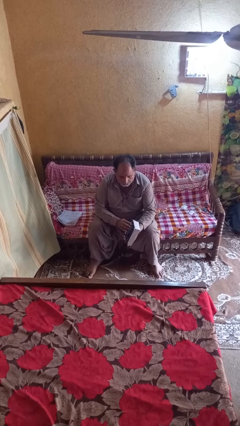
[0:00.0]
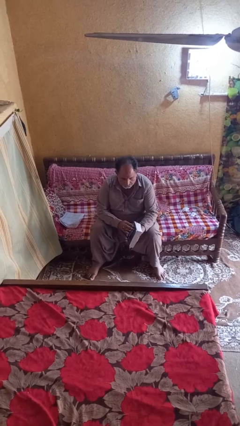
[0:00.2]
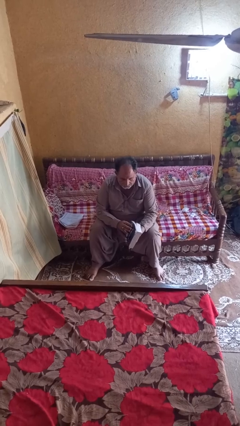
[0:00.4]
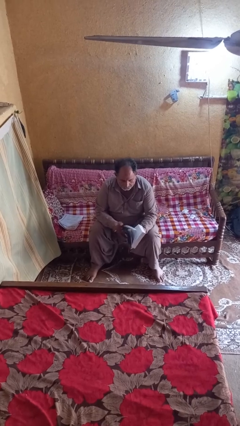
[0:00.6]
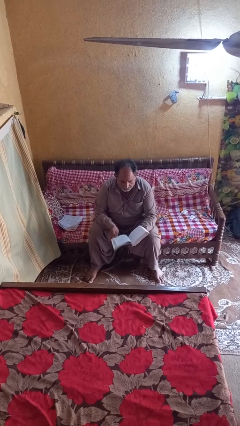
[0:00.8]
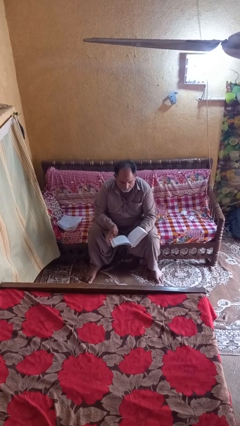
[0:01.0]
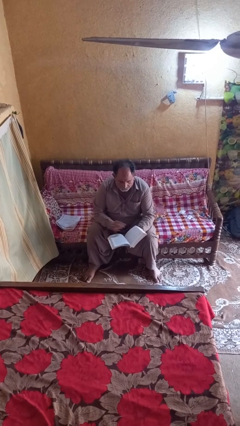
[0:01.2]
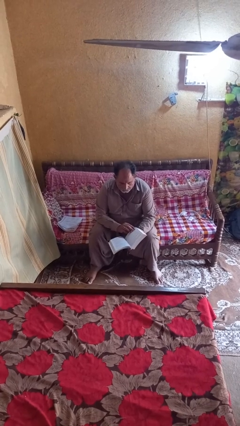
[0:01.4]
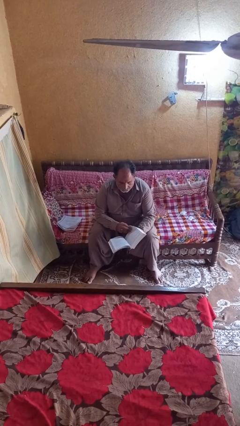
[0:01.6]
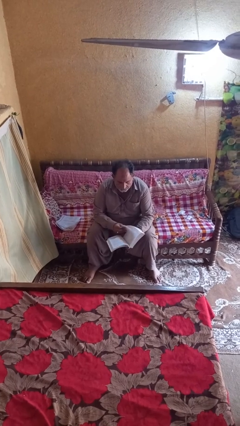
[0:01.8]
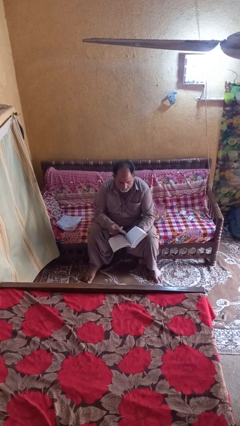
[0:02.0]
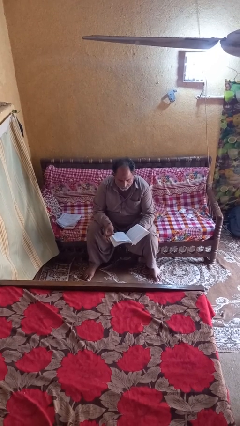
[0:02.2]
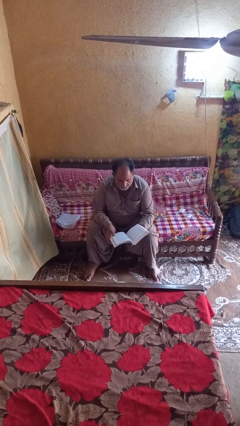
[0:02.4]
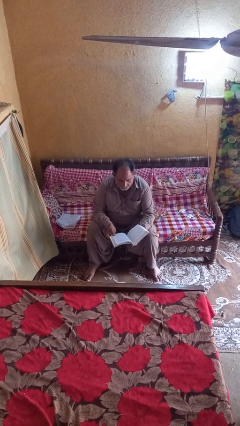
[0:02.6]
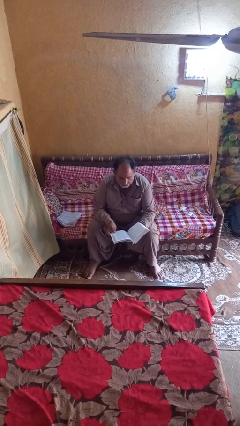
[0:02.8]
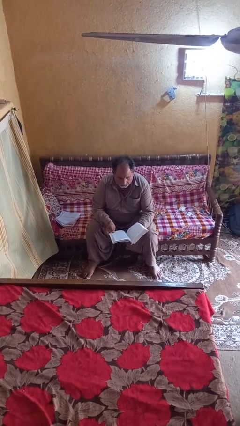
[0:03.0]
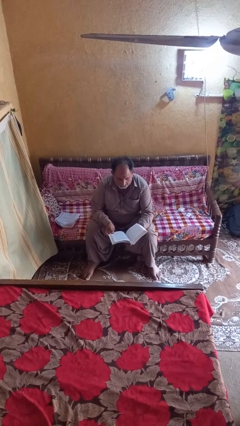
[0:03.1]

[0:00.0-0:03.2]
person reads book

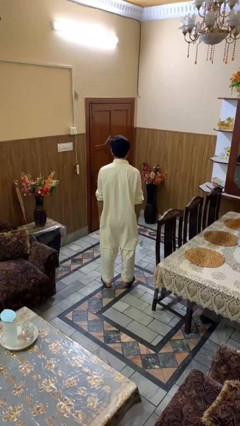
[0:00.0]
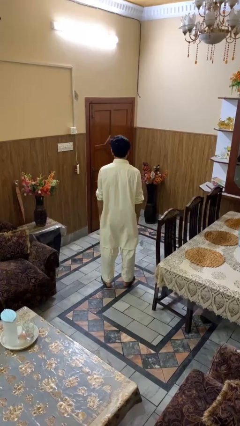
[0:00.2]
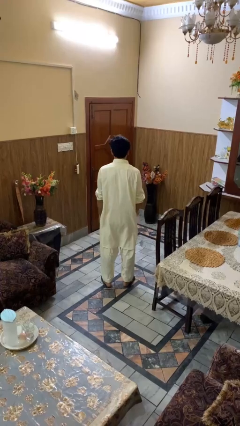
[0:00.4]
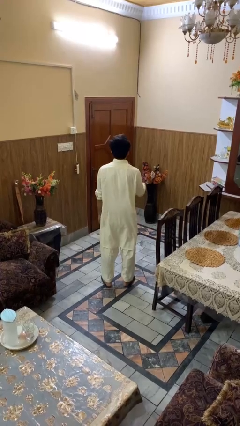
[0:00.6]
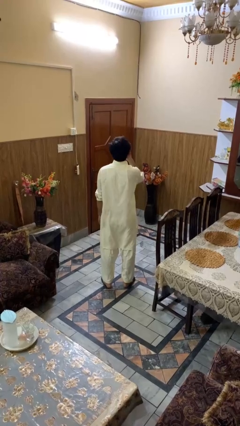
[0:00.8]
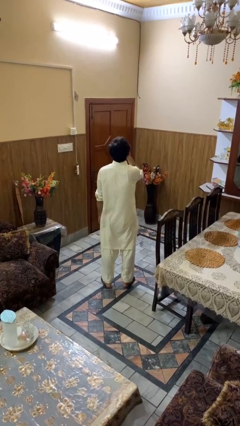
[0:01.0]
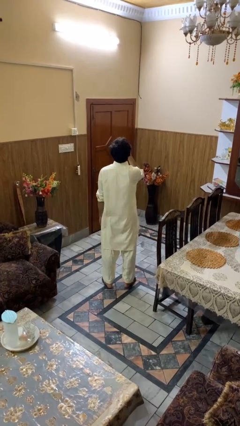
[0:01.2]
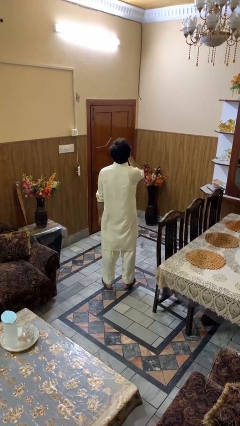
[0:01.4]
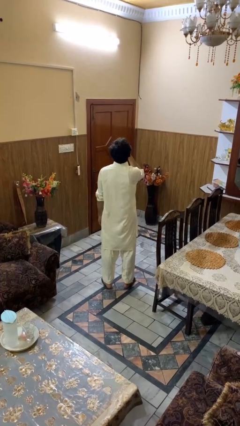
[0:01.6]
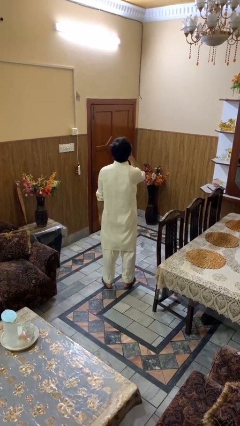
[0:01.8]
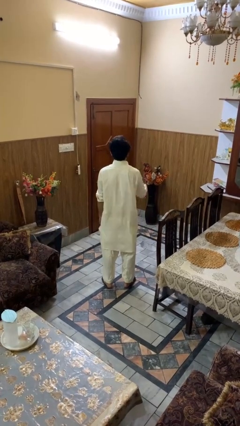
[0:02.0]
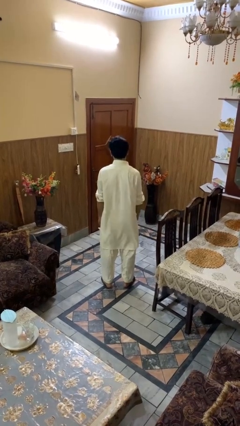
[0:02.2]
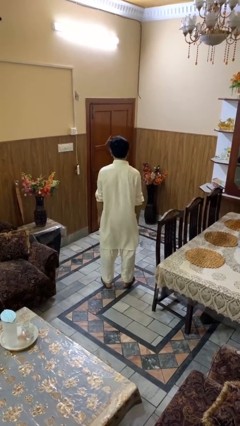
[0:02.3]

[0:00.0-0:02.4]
person yawns

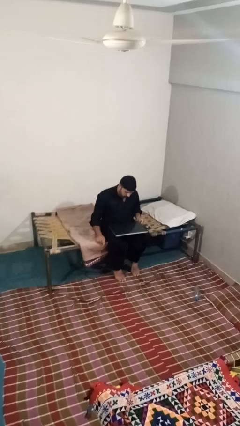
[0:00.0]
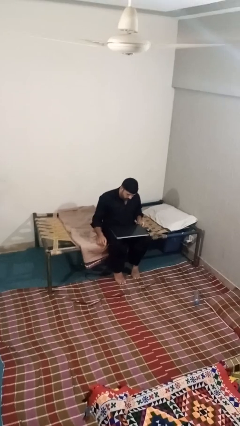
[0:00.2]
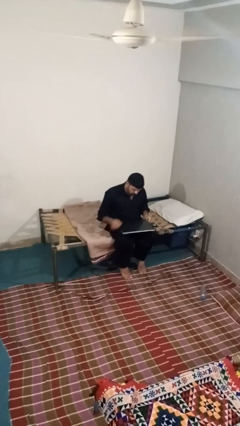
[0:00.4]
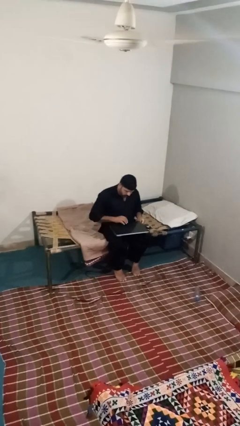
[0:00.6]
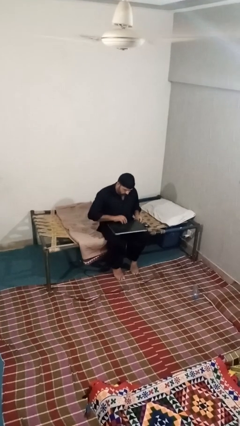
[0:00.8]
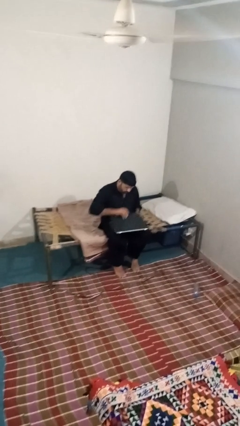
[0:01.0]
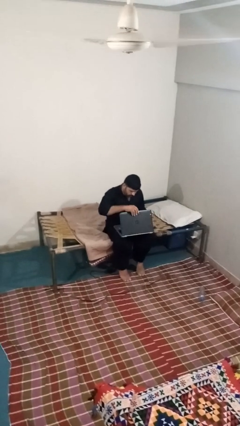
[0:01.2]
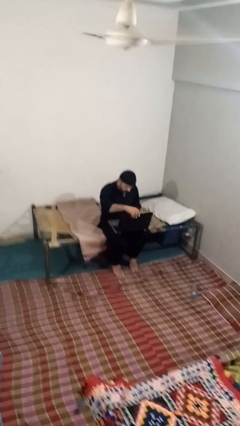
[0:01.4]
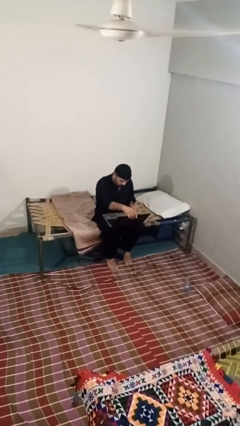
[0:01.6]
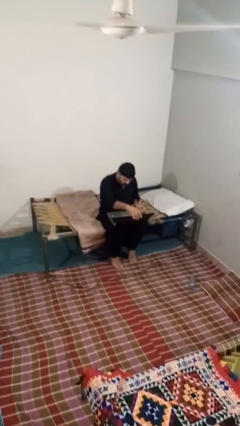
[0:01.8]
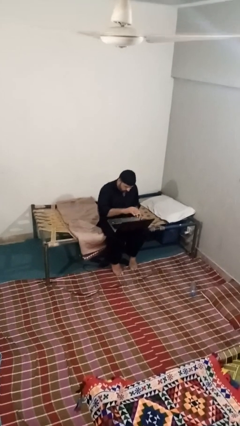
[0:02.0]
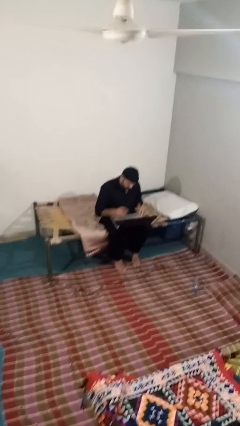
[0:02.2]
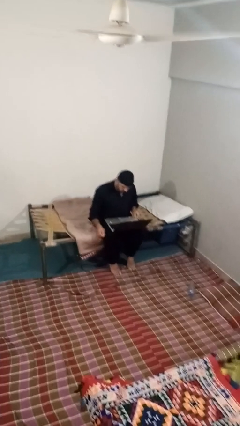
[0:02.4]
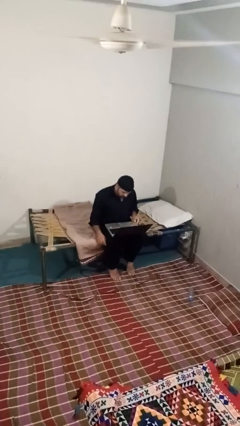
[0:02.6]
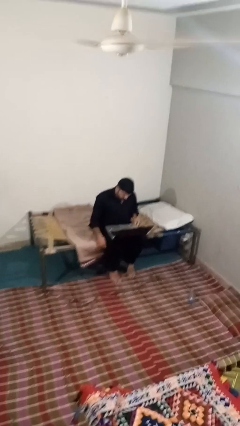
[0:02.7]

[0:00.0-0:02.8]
person opens laptop

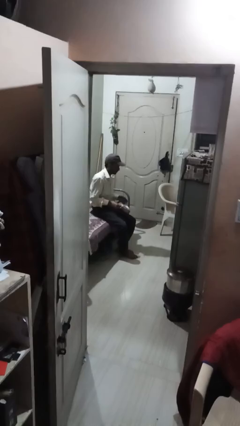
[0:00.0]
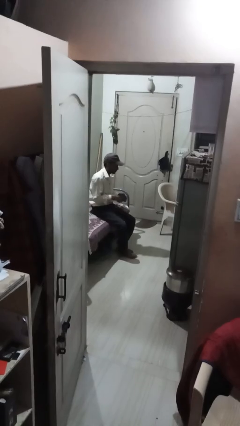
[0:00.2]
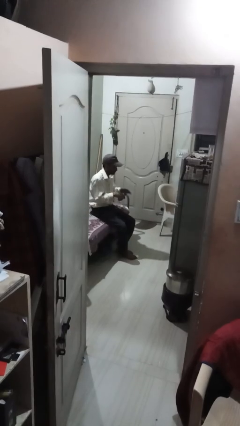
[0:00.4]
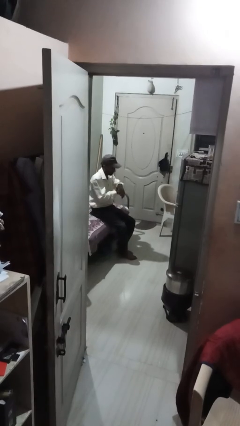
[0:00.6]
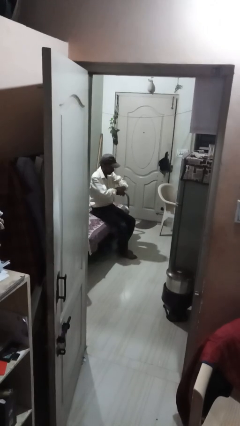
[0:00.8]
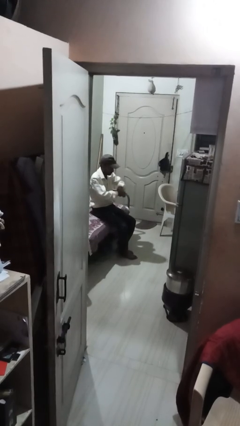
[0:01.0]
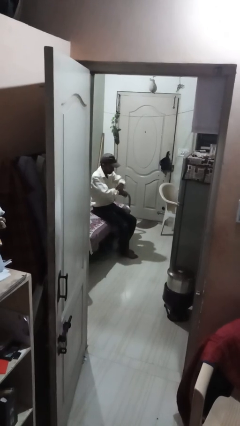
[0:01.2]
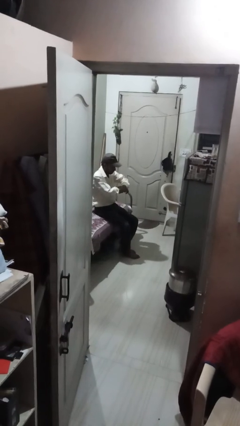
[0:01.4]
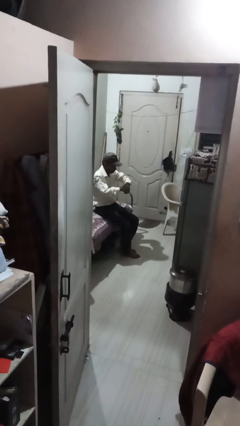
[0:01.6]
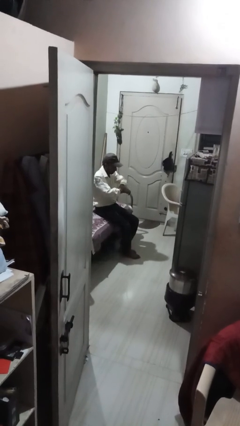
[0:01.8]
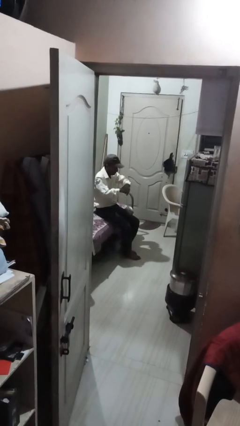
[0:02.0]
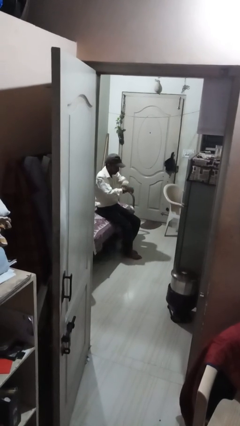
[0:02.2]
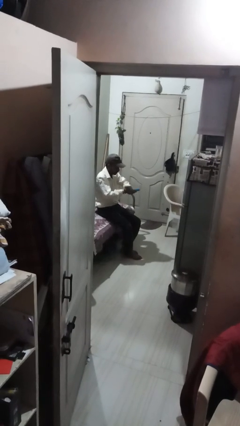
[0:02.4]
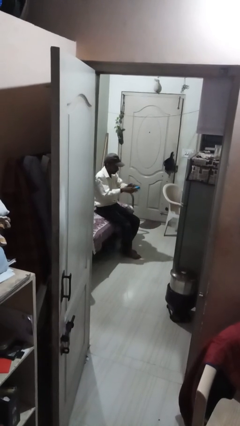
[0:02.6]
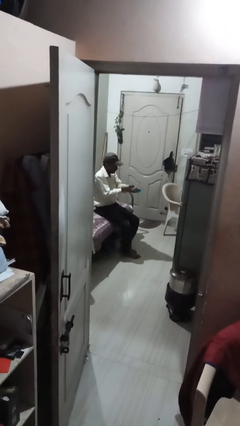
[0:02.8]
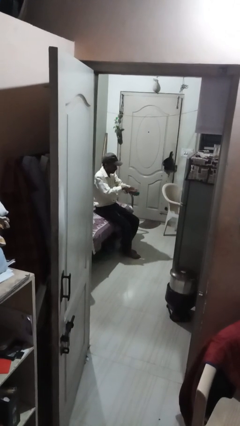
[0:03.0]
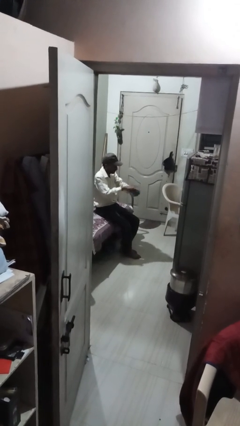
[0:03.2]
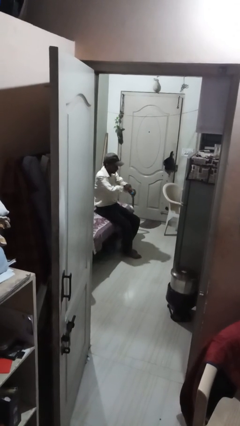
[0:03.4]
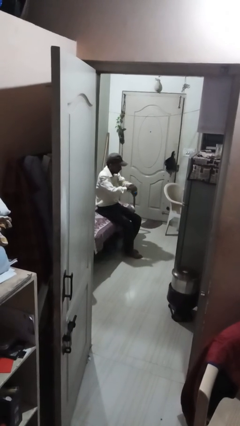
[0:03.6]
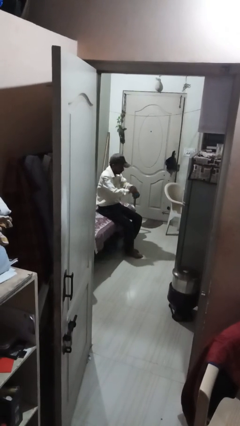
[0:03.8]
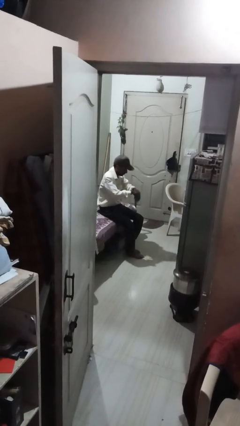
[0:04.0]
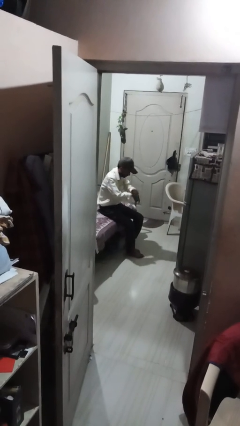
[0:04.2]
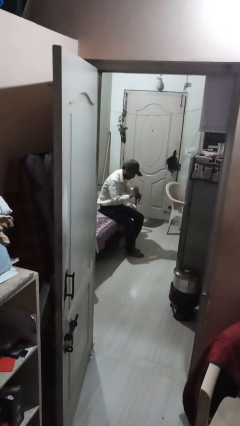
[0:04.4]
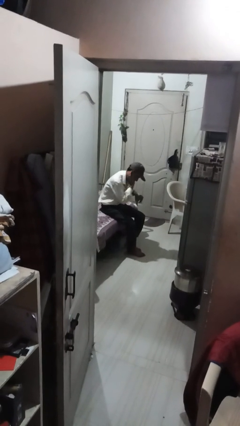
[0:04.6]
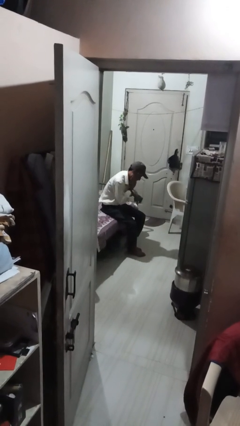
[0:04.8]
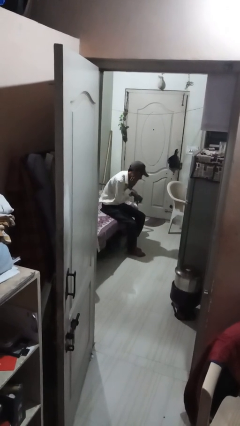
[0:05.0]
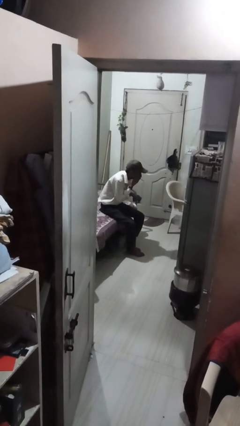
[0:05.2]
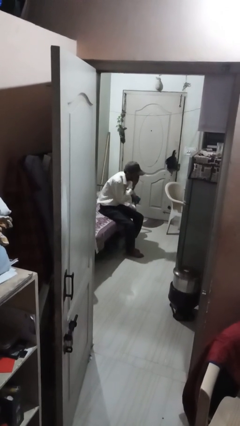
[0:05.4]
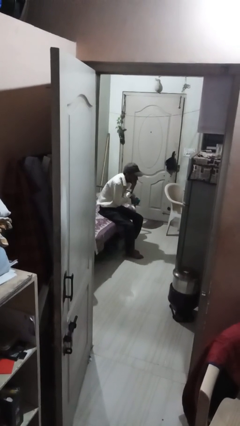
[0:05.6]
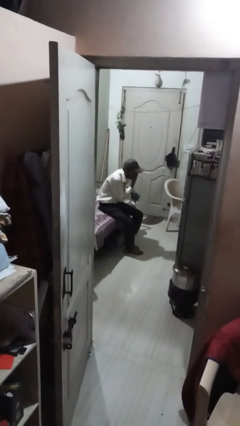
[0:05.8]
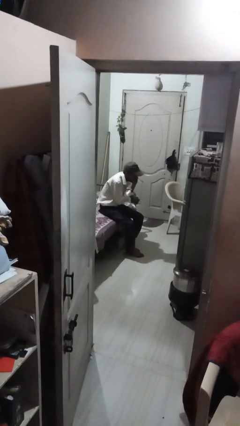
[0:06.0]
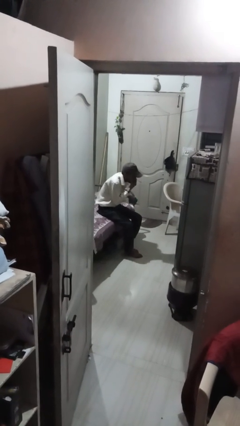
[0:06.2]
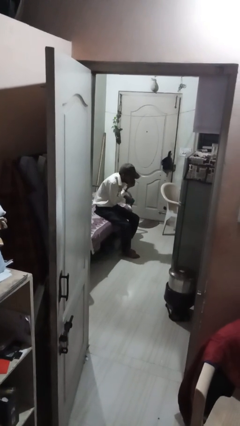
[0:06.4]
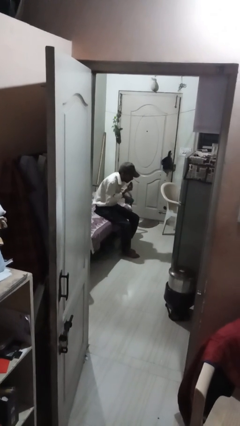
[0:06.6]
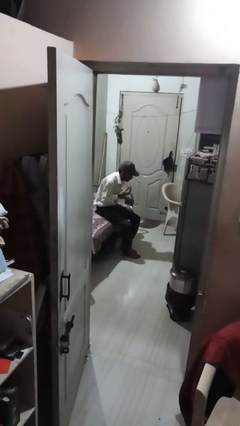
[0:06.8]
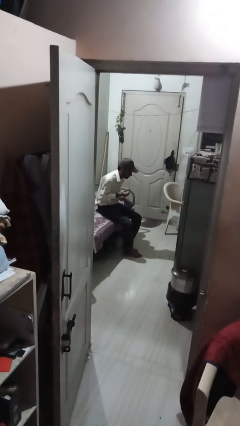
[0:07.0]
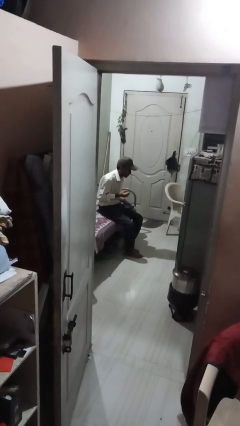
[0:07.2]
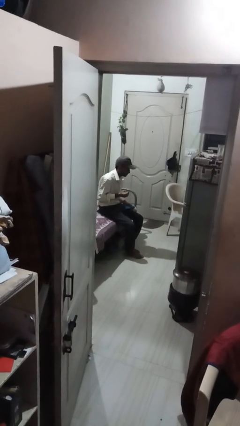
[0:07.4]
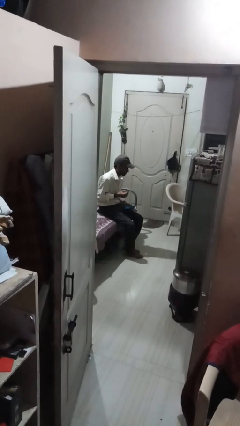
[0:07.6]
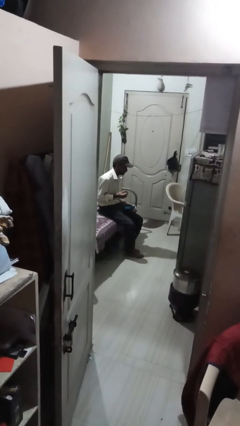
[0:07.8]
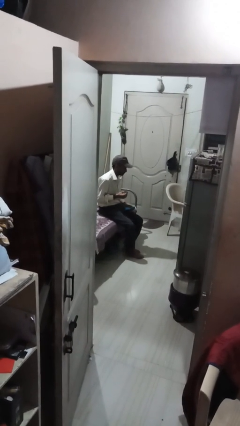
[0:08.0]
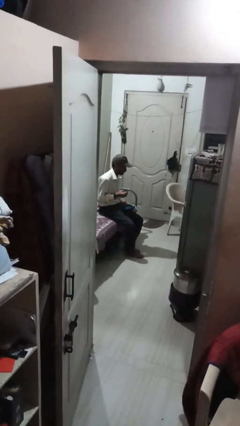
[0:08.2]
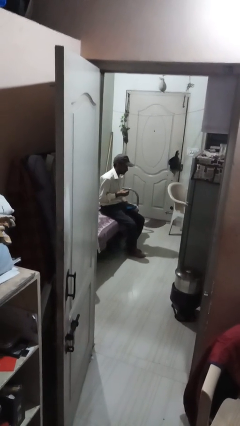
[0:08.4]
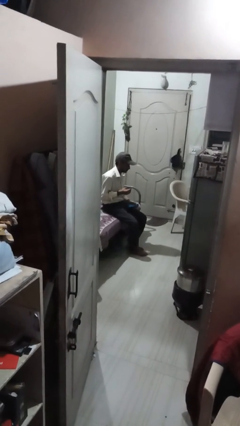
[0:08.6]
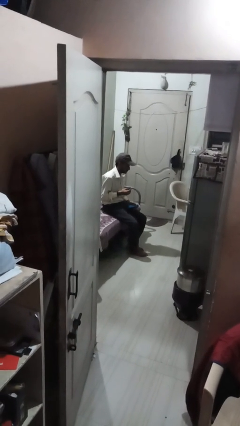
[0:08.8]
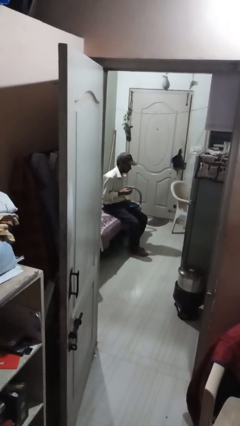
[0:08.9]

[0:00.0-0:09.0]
person applies facial moisturizer

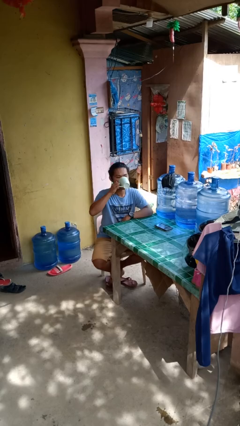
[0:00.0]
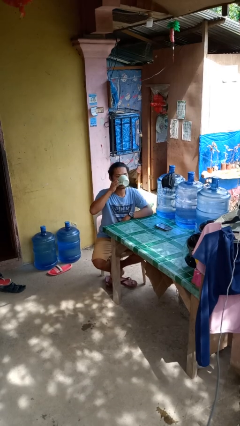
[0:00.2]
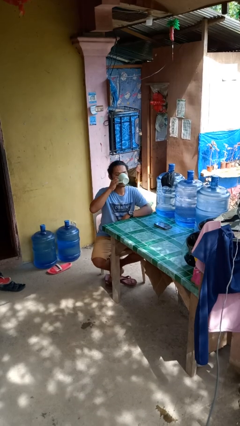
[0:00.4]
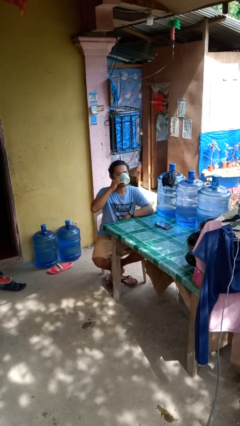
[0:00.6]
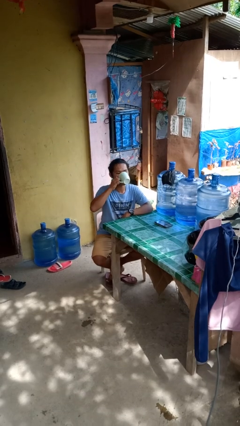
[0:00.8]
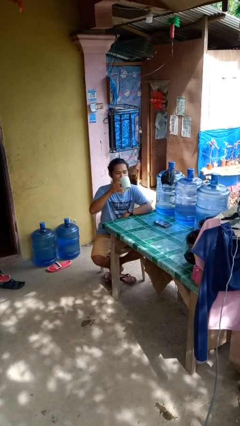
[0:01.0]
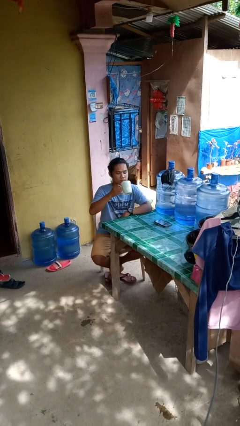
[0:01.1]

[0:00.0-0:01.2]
person drinks from mug
